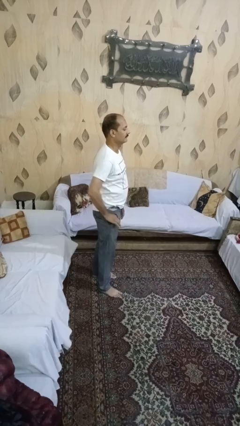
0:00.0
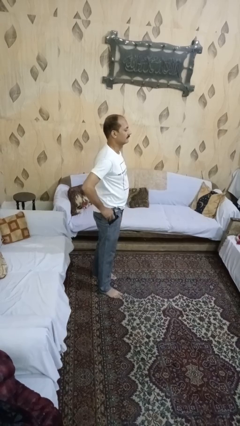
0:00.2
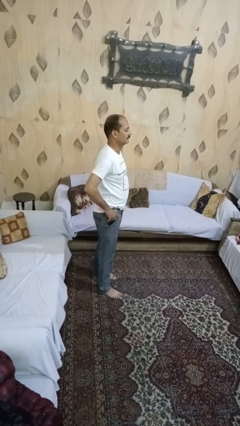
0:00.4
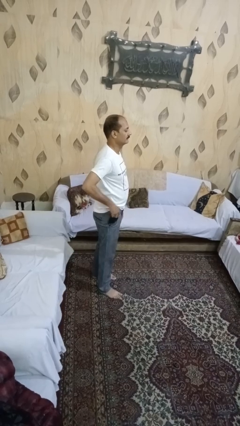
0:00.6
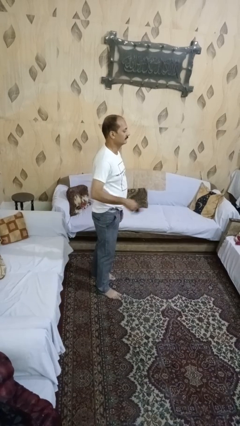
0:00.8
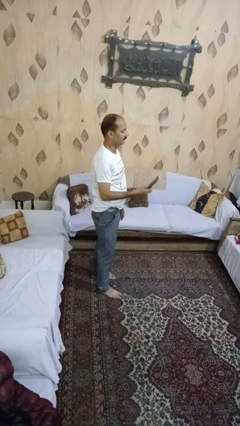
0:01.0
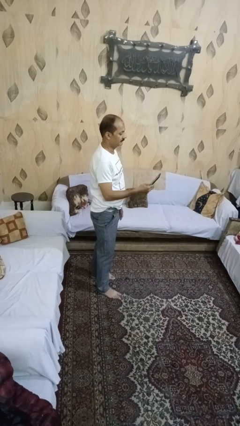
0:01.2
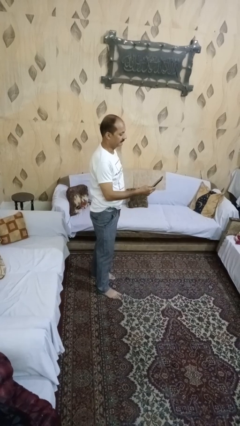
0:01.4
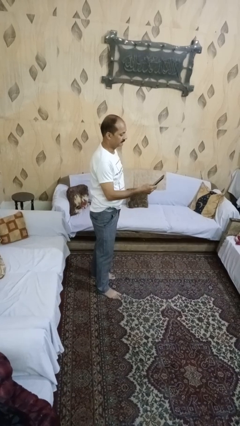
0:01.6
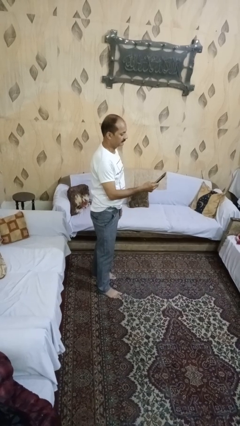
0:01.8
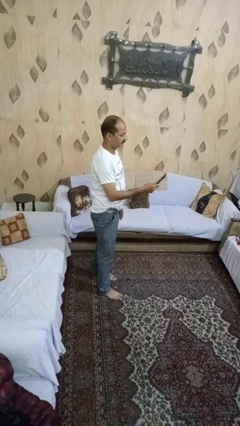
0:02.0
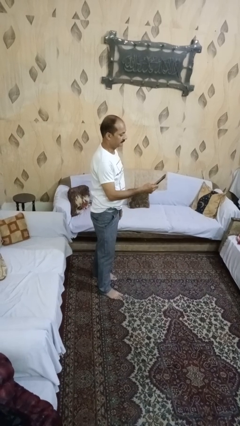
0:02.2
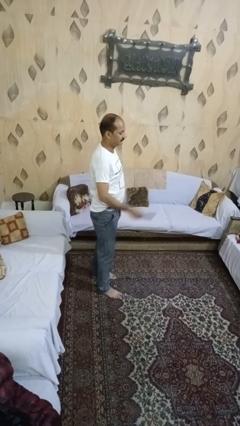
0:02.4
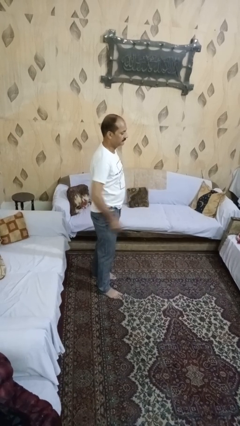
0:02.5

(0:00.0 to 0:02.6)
person takes phone from pocket

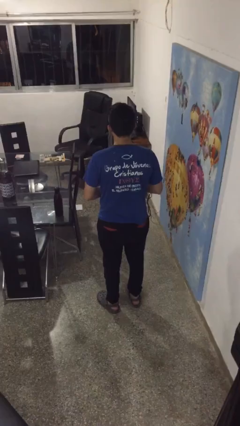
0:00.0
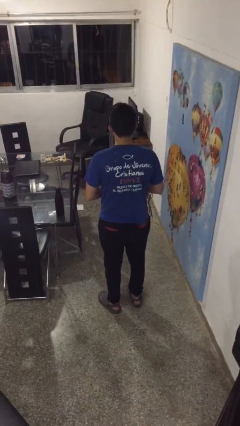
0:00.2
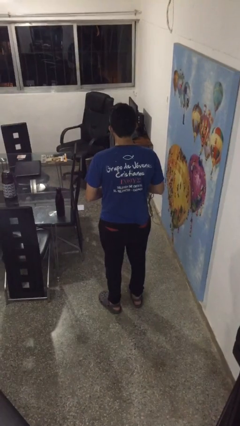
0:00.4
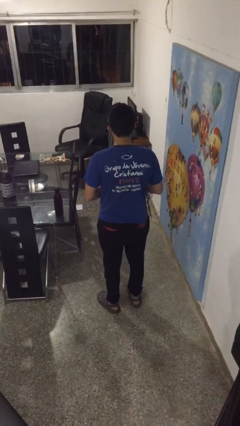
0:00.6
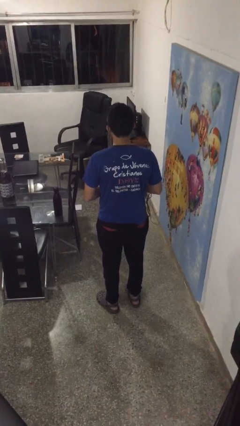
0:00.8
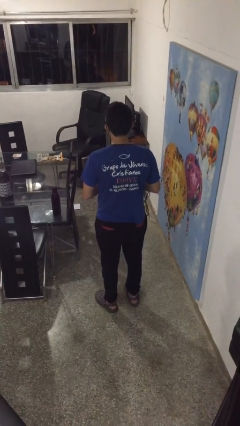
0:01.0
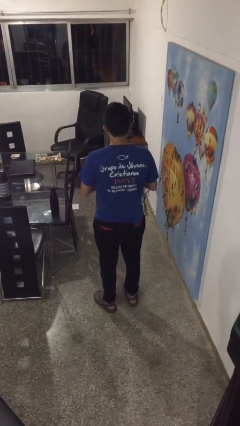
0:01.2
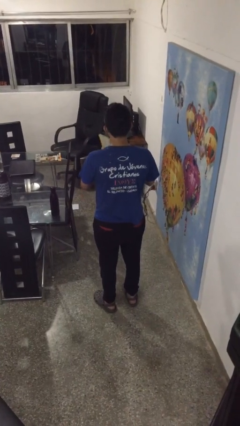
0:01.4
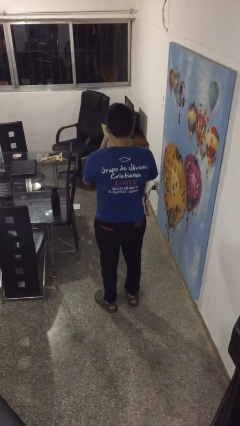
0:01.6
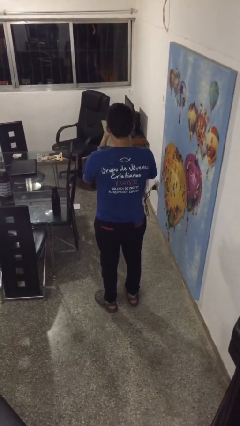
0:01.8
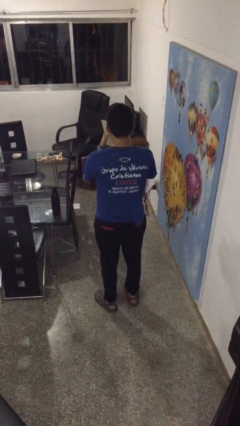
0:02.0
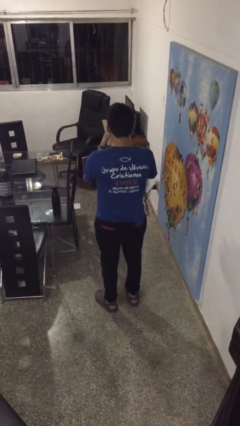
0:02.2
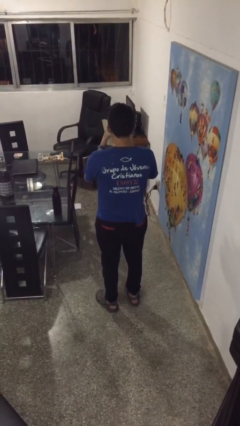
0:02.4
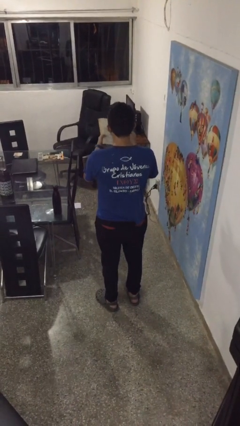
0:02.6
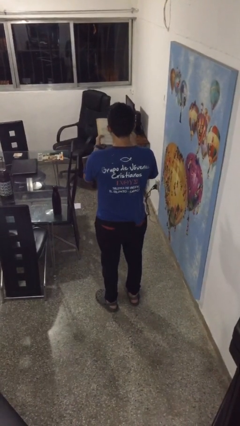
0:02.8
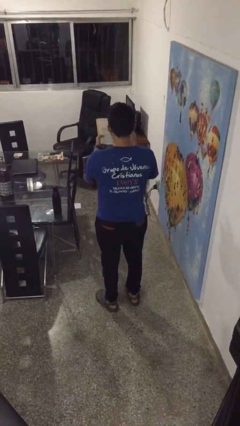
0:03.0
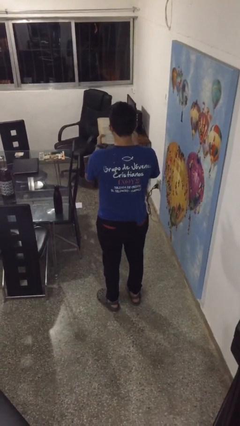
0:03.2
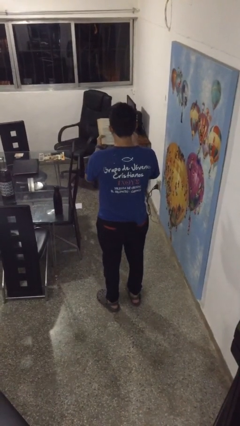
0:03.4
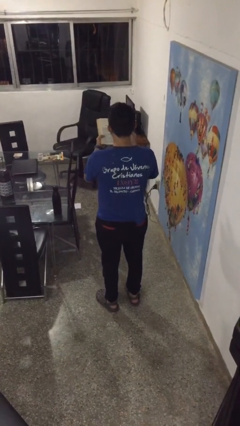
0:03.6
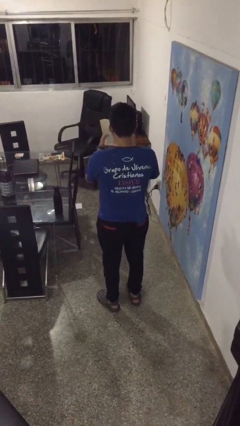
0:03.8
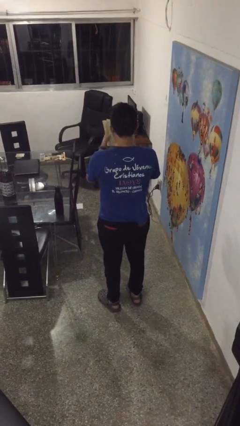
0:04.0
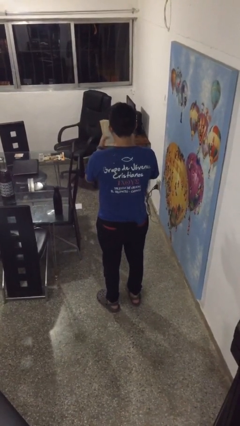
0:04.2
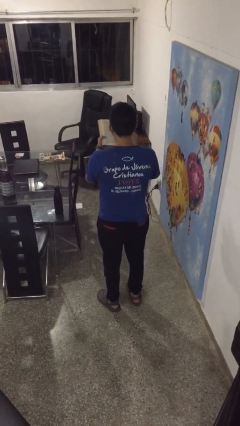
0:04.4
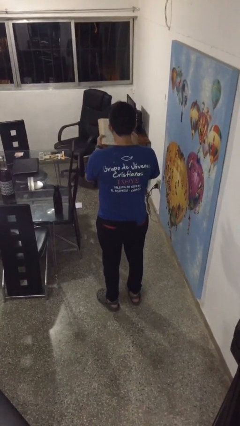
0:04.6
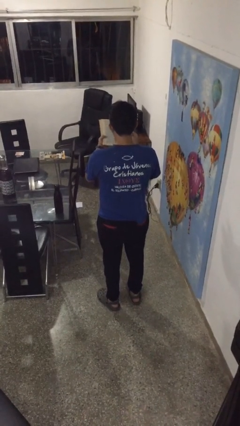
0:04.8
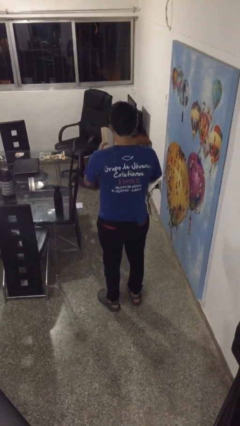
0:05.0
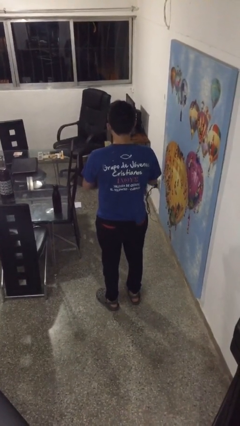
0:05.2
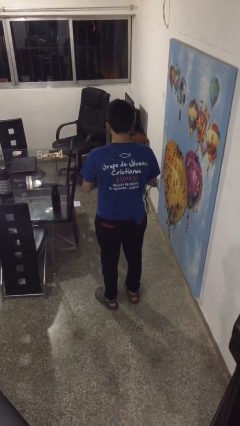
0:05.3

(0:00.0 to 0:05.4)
person reads book

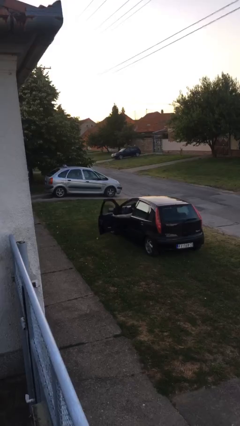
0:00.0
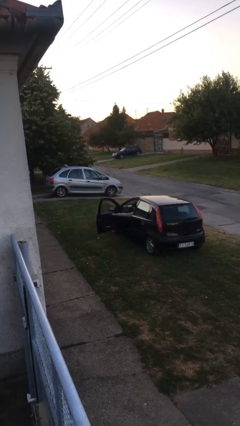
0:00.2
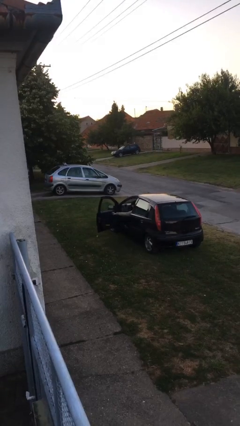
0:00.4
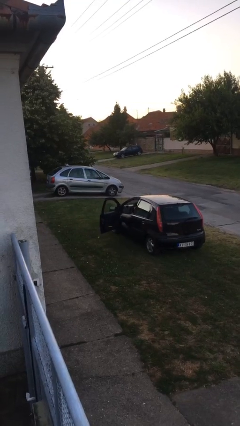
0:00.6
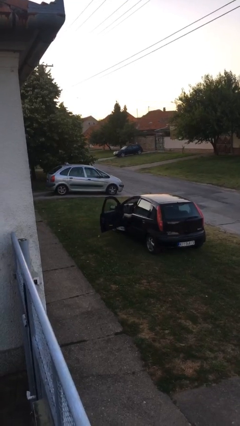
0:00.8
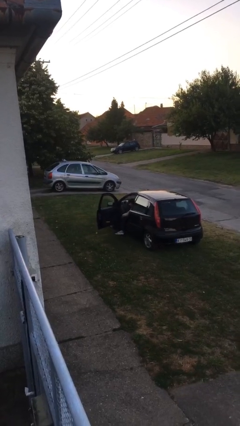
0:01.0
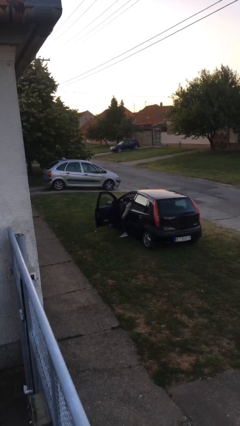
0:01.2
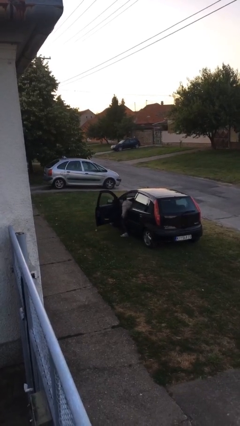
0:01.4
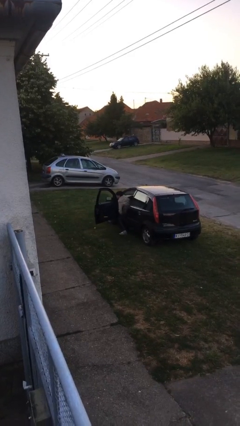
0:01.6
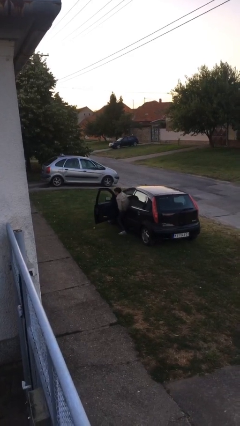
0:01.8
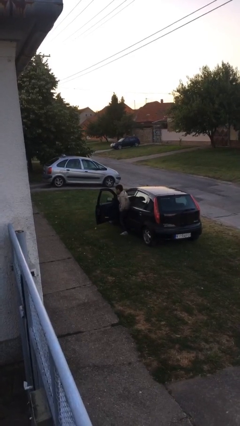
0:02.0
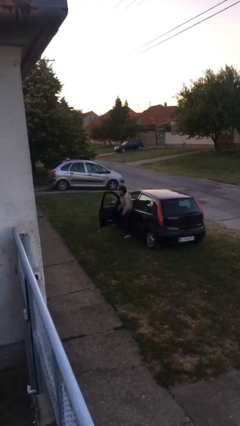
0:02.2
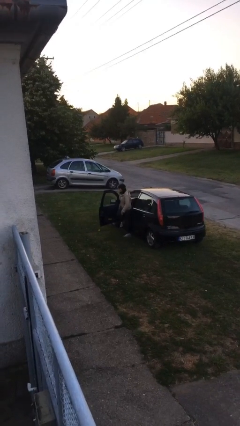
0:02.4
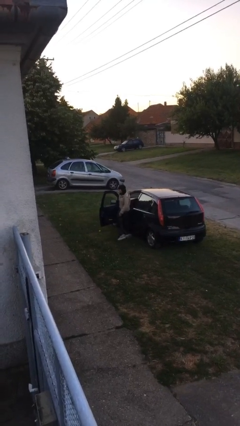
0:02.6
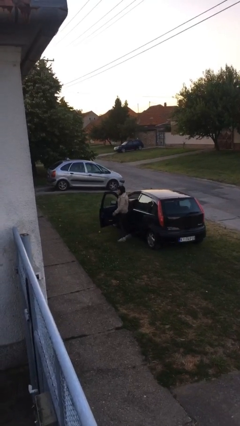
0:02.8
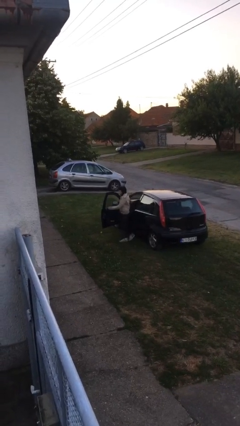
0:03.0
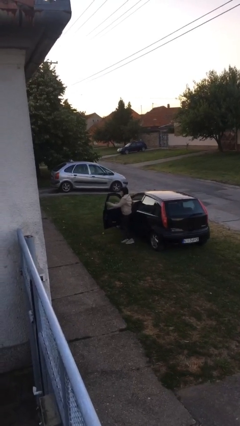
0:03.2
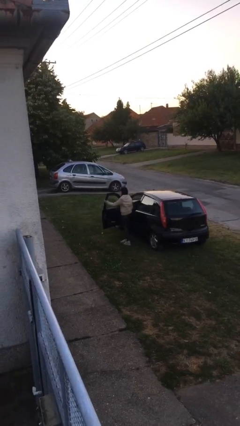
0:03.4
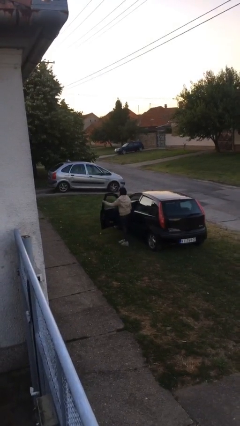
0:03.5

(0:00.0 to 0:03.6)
person exits car

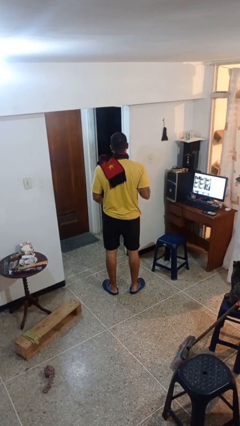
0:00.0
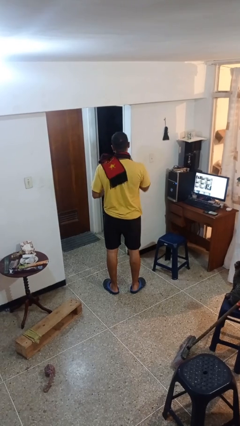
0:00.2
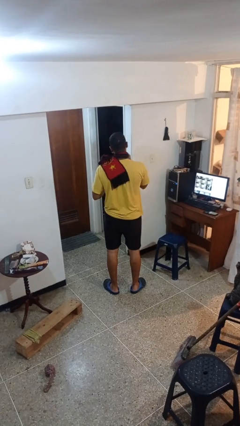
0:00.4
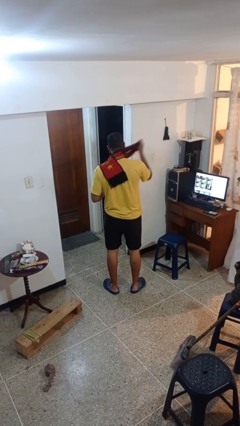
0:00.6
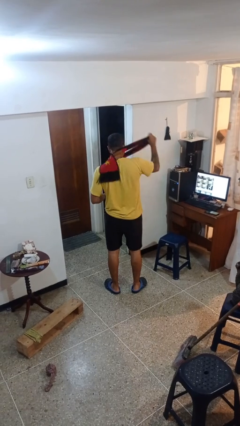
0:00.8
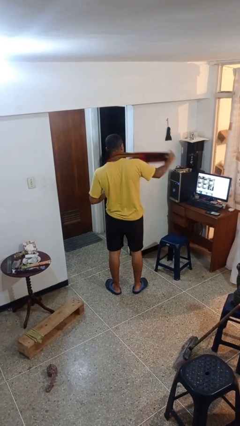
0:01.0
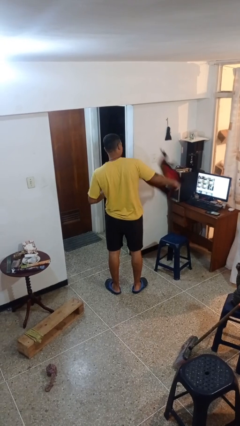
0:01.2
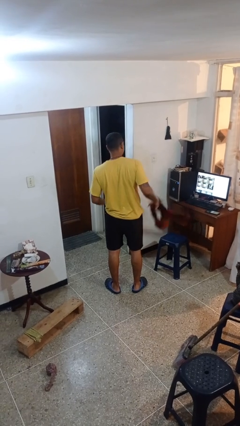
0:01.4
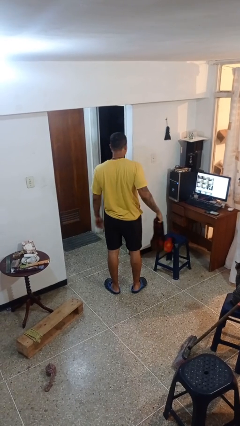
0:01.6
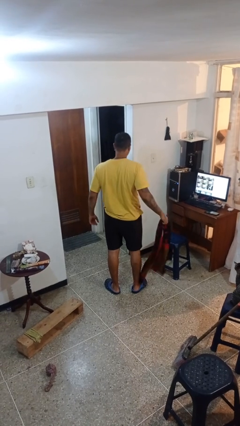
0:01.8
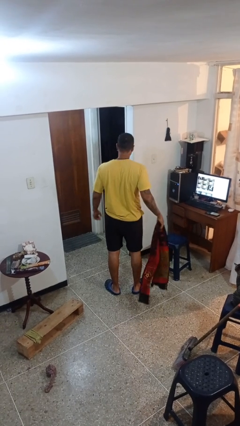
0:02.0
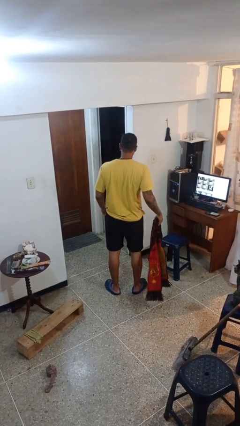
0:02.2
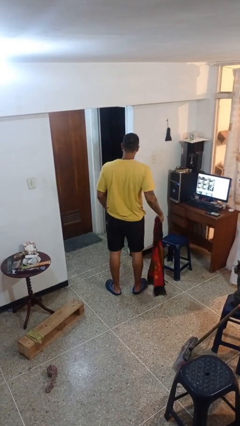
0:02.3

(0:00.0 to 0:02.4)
person takes off scarf

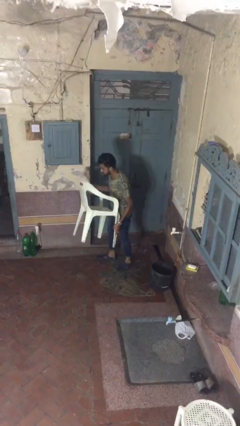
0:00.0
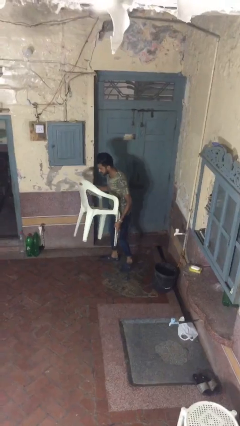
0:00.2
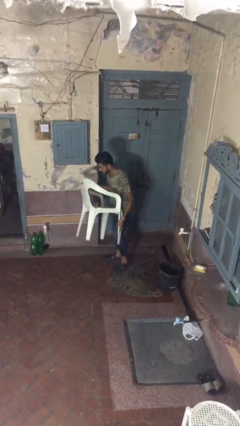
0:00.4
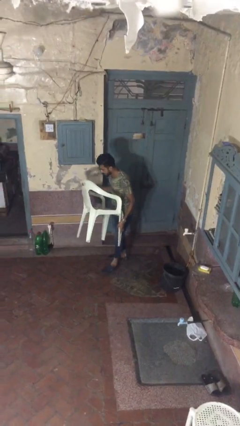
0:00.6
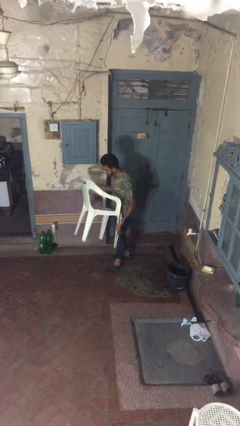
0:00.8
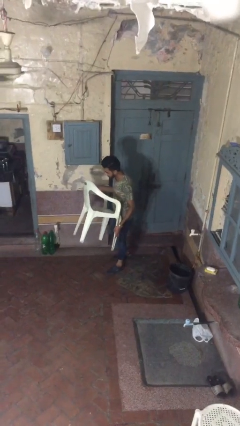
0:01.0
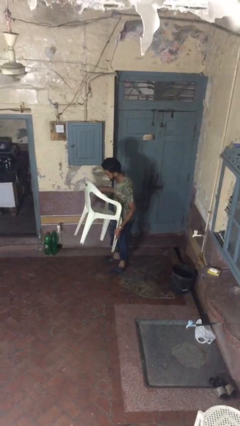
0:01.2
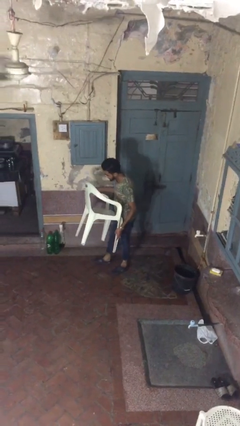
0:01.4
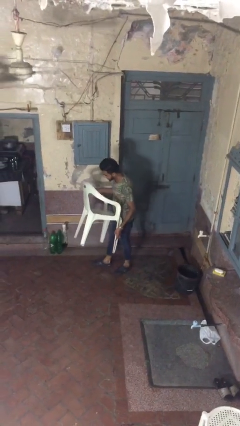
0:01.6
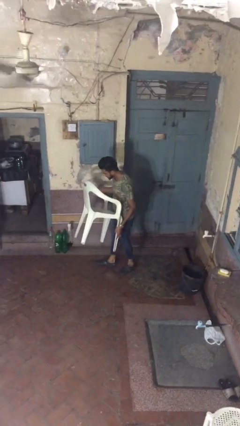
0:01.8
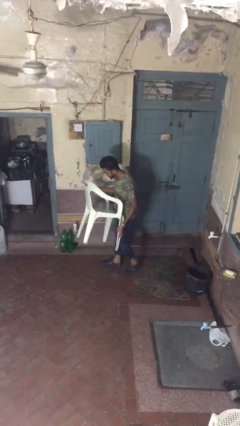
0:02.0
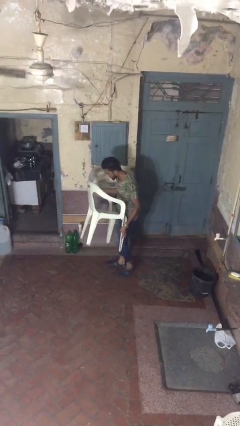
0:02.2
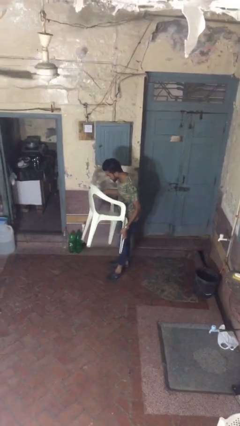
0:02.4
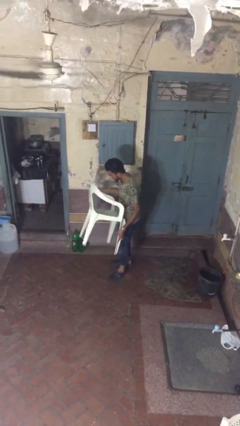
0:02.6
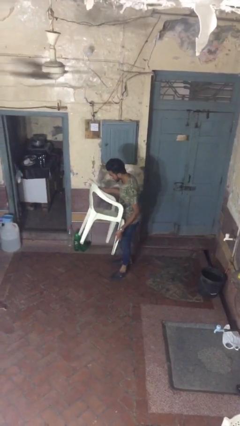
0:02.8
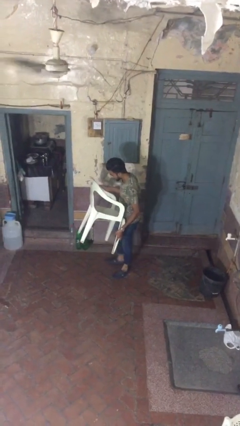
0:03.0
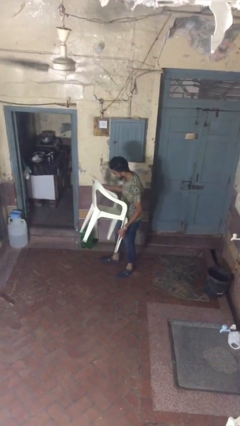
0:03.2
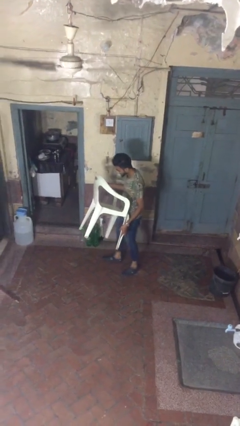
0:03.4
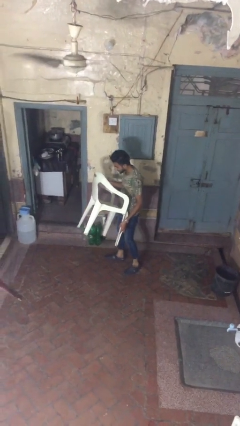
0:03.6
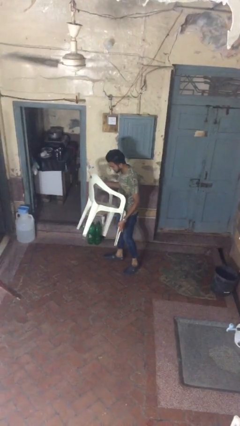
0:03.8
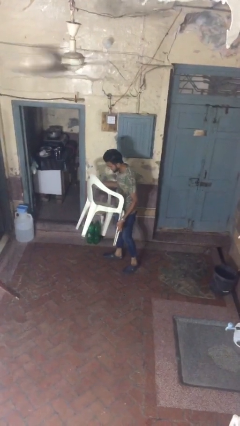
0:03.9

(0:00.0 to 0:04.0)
person carries heavy object
